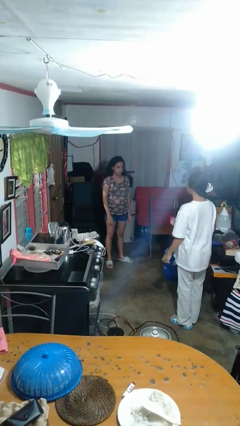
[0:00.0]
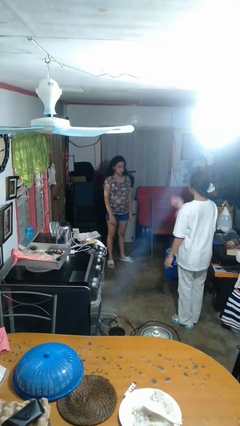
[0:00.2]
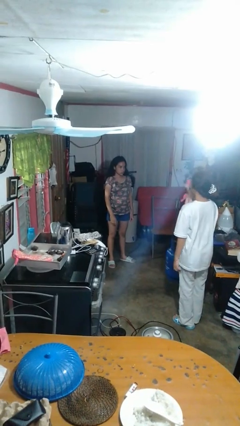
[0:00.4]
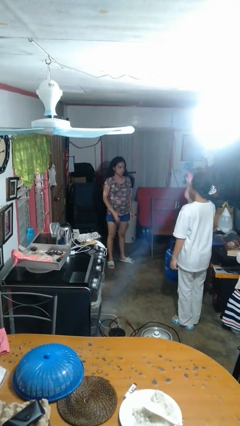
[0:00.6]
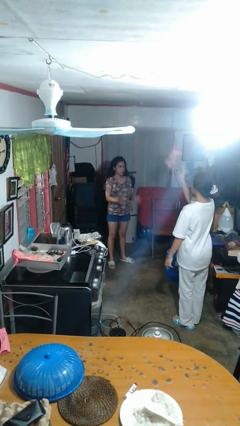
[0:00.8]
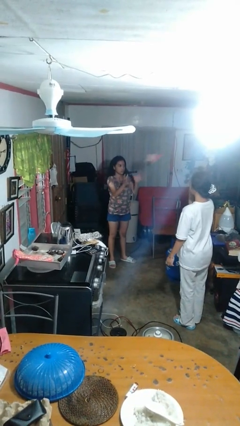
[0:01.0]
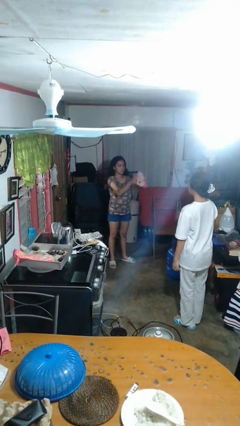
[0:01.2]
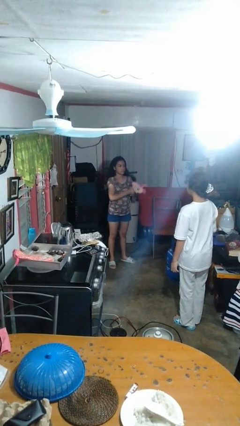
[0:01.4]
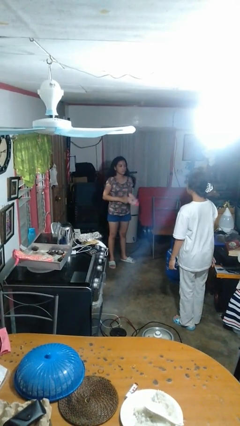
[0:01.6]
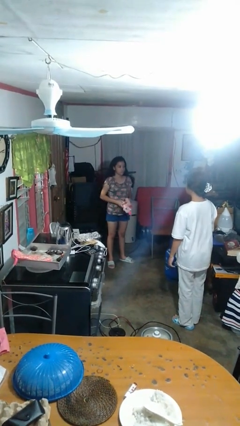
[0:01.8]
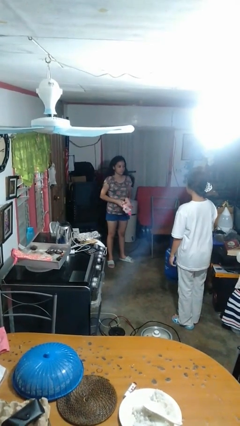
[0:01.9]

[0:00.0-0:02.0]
person catches object from person

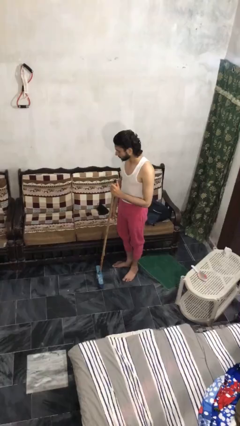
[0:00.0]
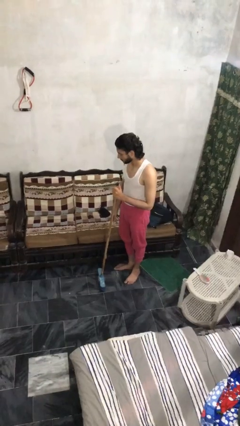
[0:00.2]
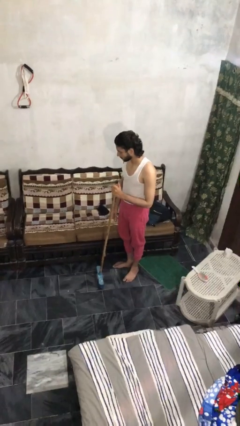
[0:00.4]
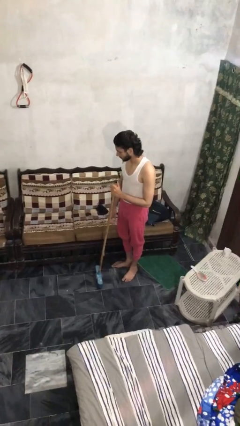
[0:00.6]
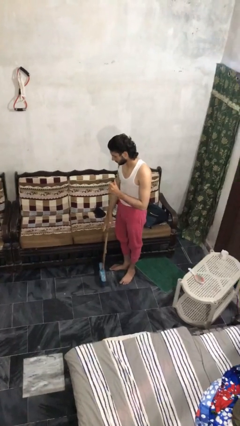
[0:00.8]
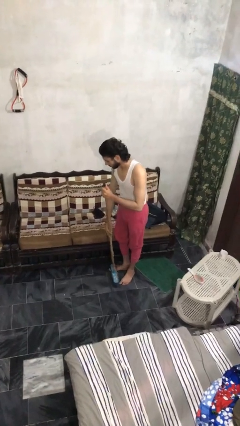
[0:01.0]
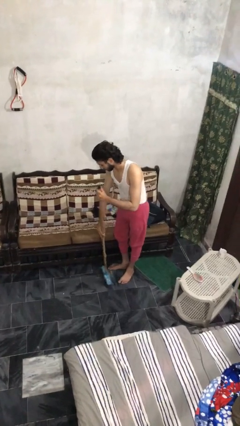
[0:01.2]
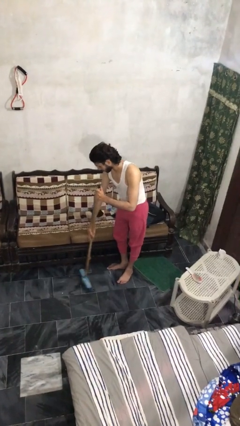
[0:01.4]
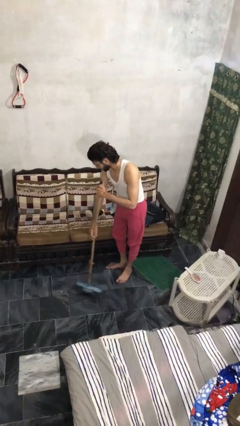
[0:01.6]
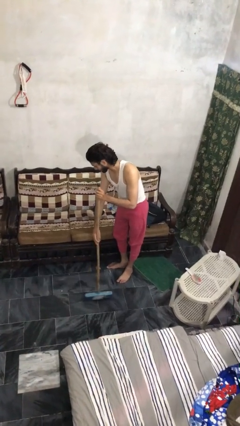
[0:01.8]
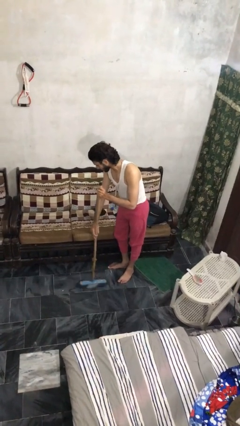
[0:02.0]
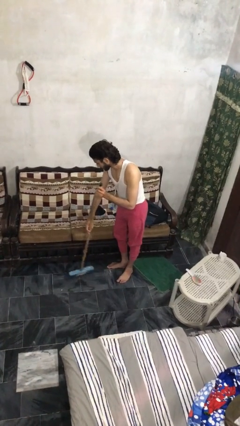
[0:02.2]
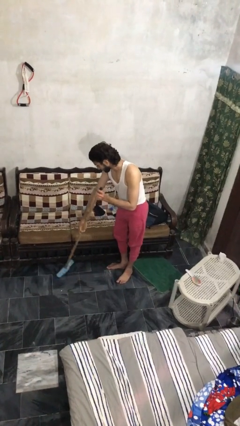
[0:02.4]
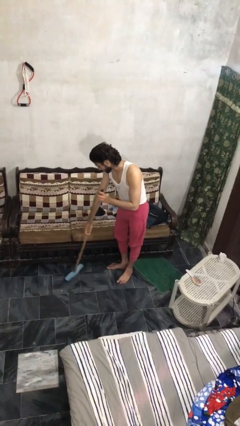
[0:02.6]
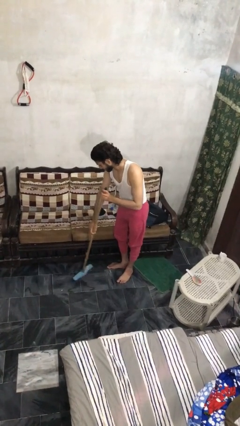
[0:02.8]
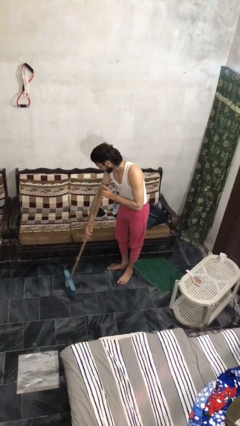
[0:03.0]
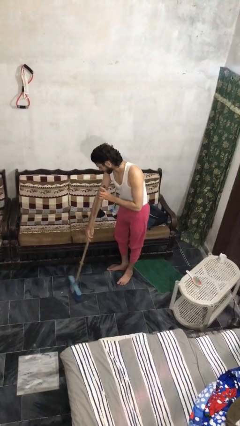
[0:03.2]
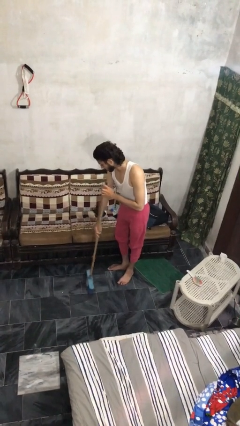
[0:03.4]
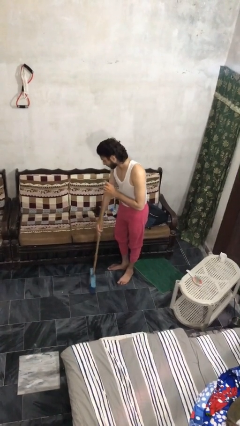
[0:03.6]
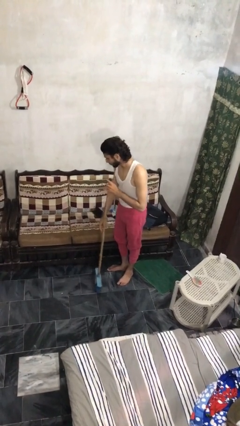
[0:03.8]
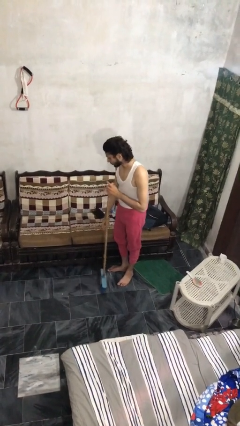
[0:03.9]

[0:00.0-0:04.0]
person sweeps floor

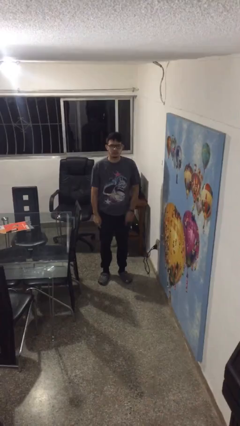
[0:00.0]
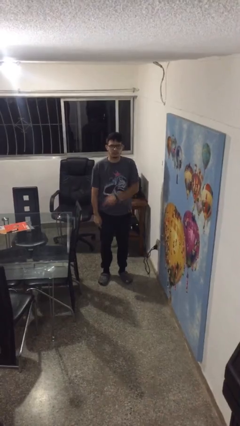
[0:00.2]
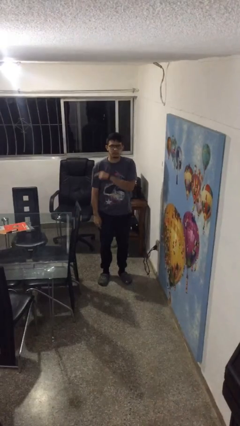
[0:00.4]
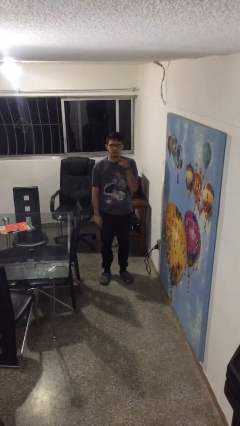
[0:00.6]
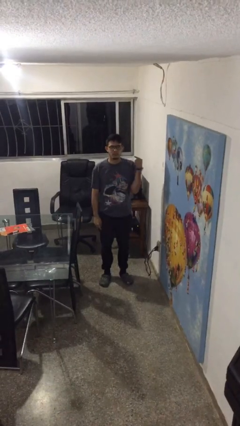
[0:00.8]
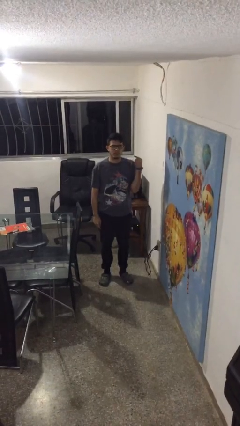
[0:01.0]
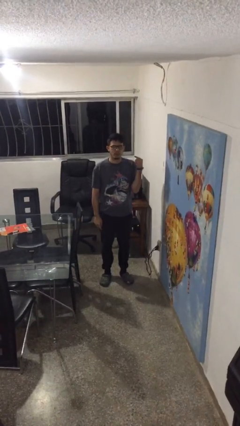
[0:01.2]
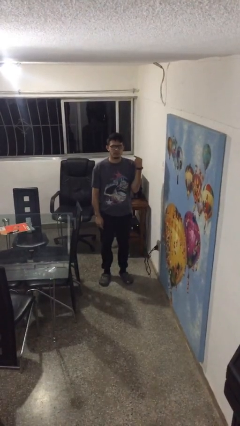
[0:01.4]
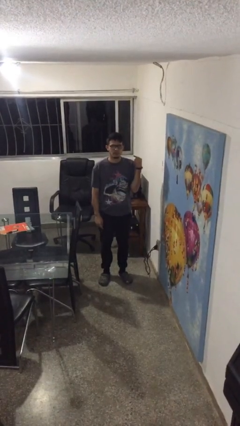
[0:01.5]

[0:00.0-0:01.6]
person gestures cut

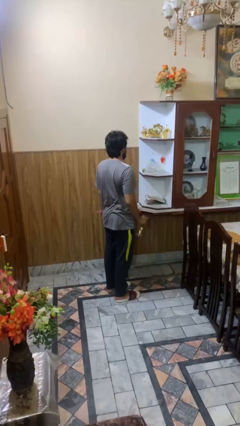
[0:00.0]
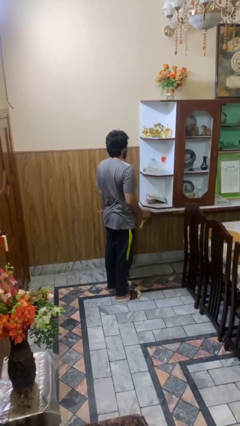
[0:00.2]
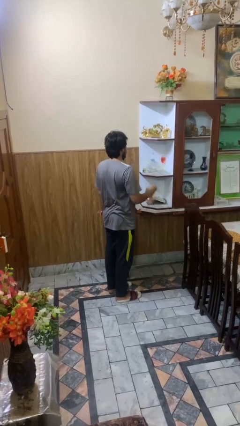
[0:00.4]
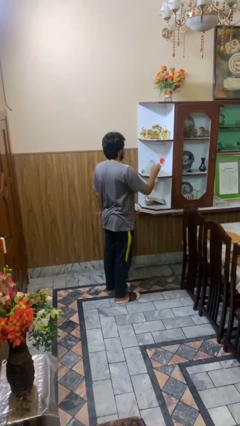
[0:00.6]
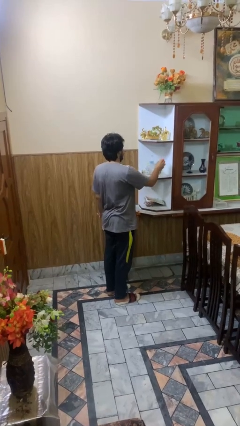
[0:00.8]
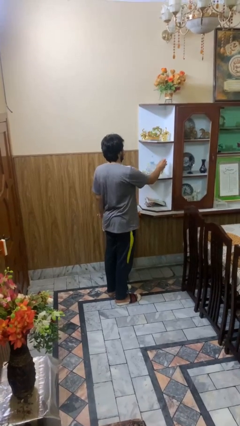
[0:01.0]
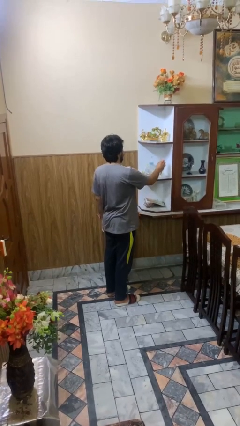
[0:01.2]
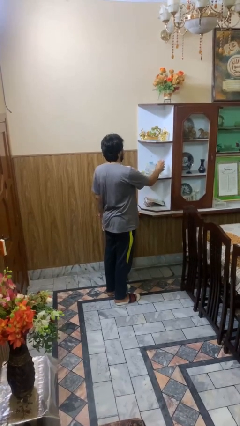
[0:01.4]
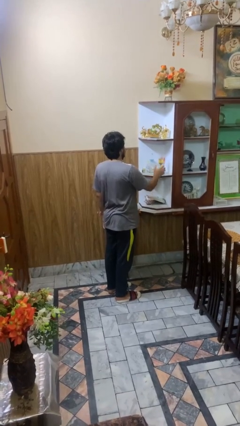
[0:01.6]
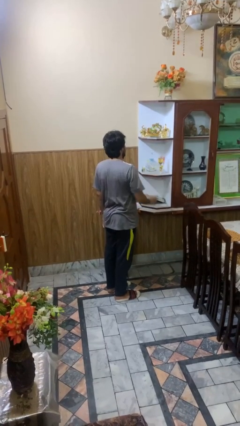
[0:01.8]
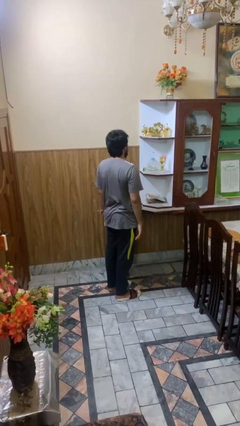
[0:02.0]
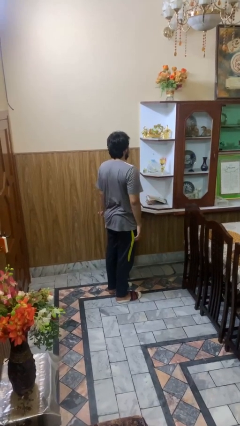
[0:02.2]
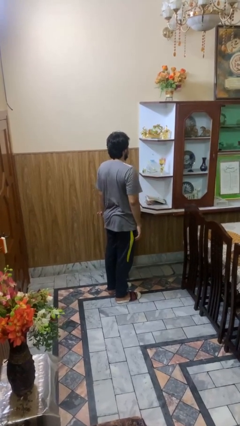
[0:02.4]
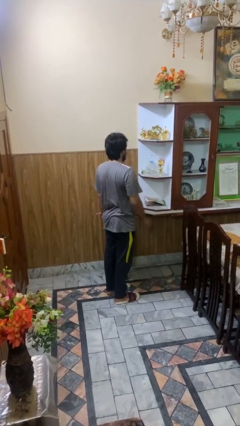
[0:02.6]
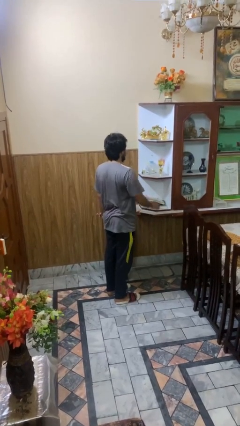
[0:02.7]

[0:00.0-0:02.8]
person puts down object into cabinet

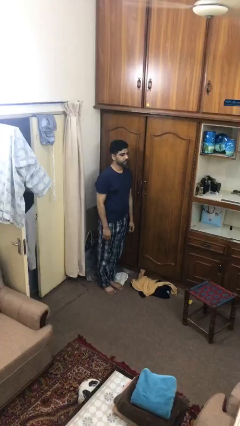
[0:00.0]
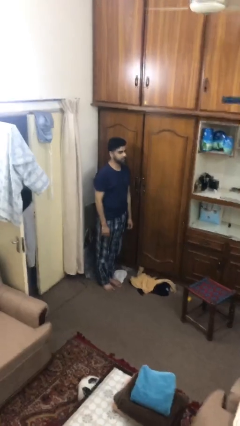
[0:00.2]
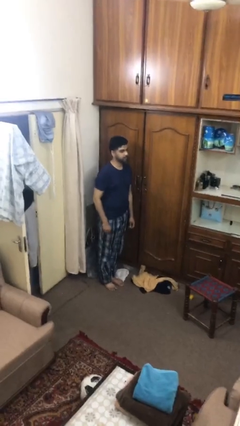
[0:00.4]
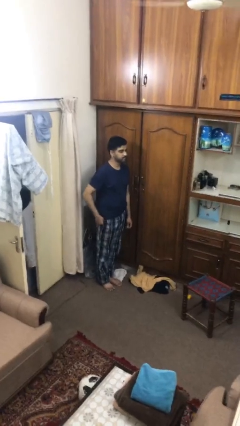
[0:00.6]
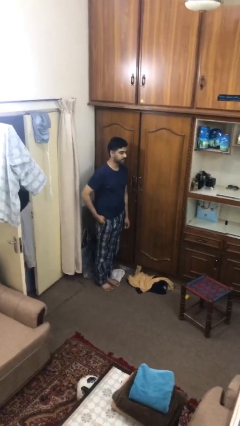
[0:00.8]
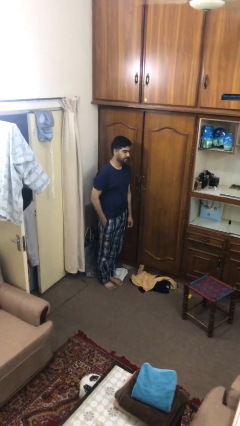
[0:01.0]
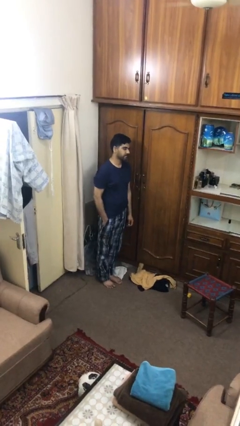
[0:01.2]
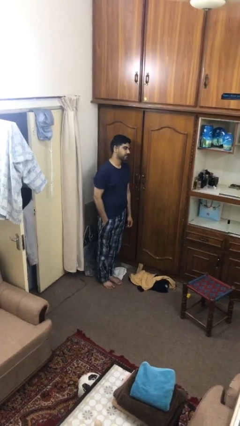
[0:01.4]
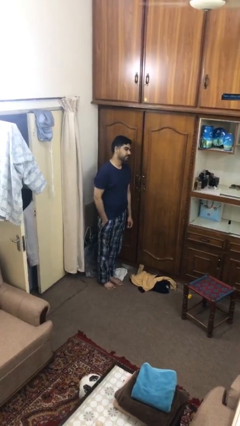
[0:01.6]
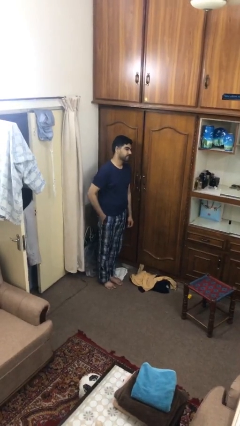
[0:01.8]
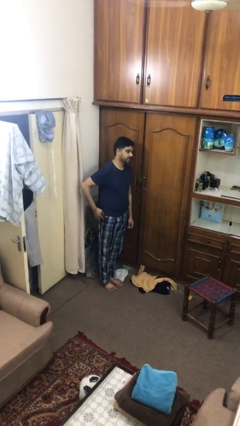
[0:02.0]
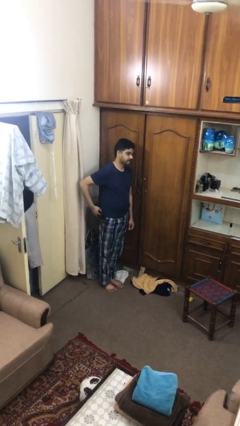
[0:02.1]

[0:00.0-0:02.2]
person takes phone from pocket

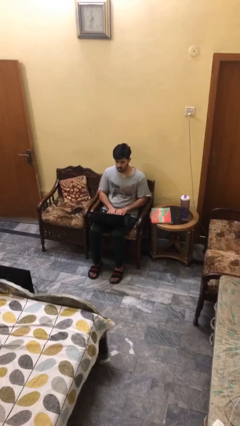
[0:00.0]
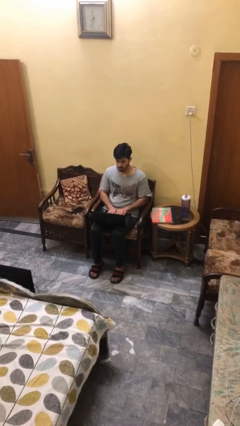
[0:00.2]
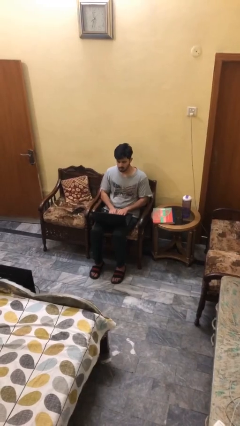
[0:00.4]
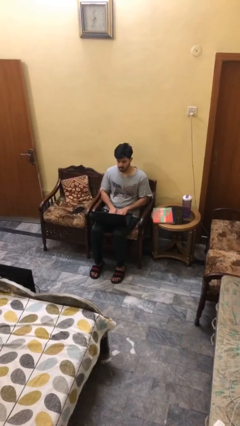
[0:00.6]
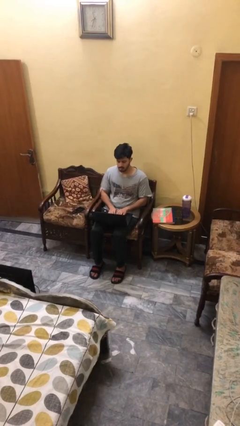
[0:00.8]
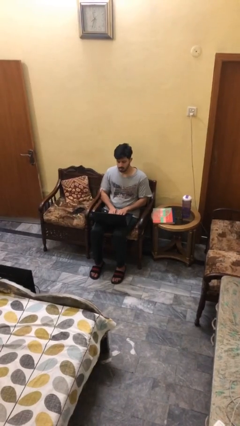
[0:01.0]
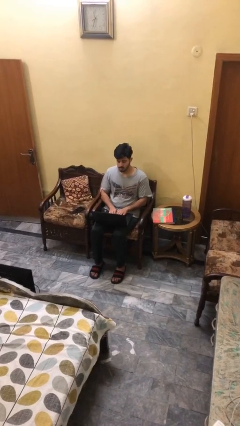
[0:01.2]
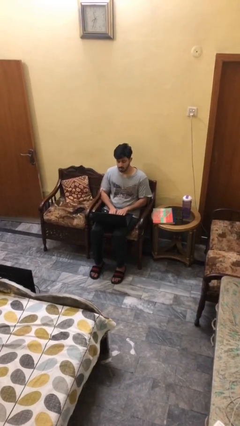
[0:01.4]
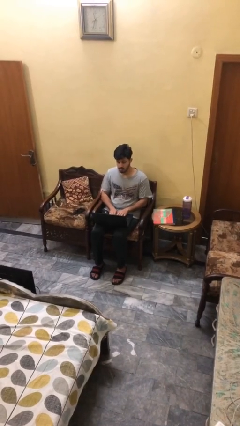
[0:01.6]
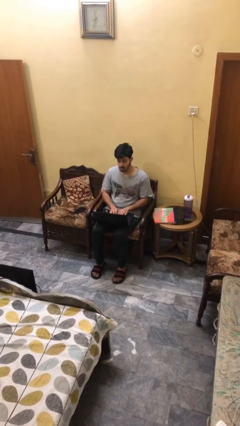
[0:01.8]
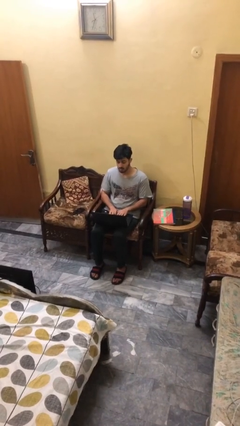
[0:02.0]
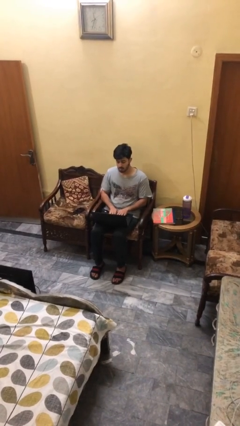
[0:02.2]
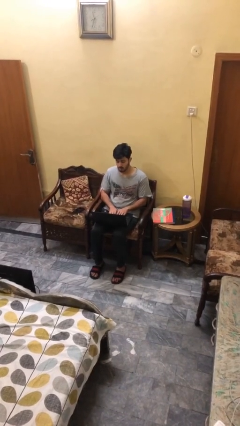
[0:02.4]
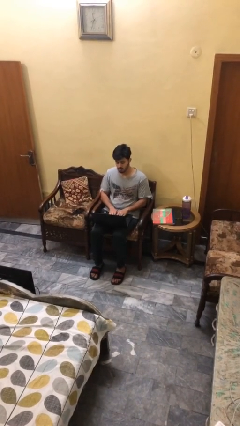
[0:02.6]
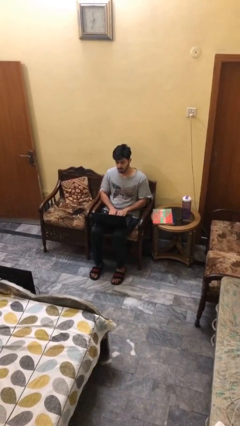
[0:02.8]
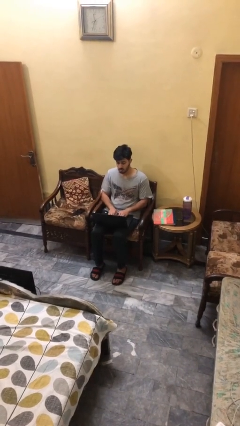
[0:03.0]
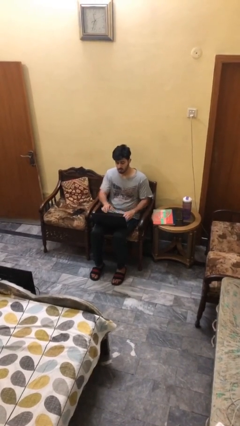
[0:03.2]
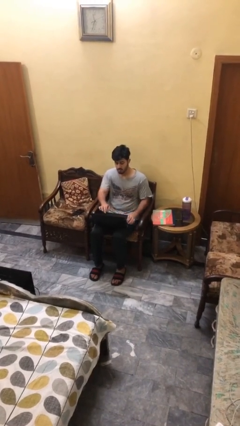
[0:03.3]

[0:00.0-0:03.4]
person interacts with laptop

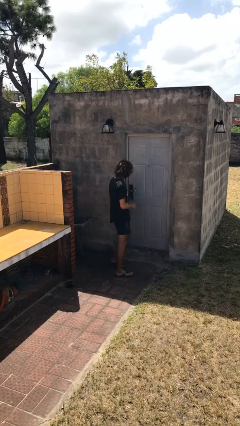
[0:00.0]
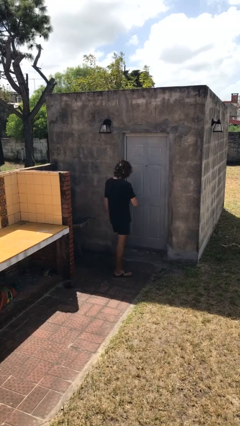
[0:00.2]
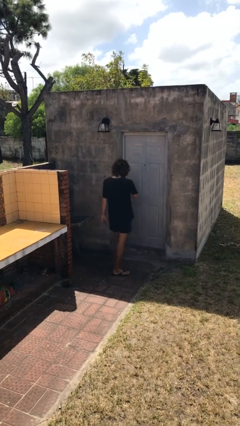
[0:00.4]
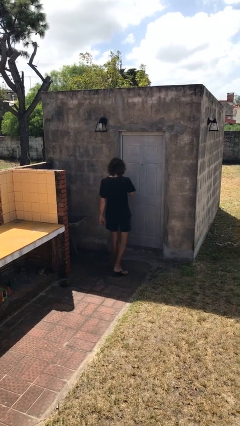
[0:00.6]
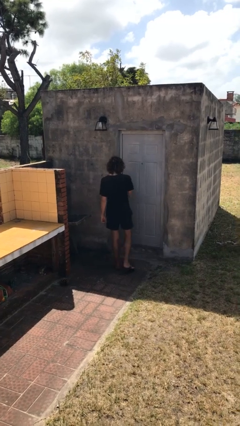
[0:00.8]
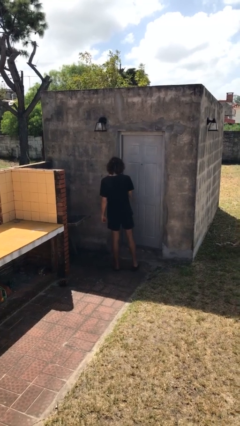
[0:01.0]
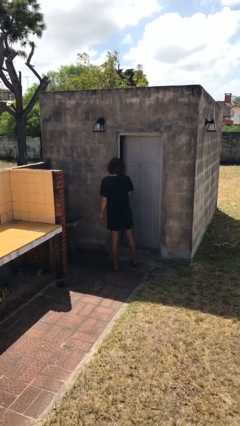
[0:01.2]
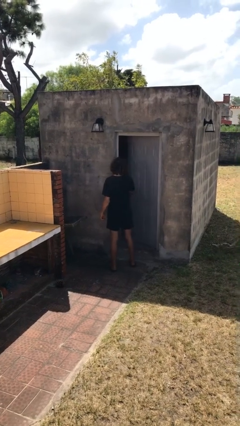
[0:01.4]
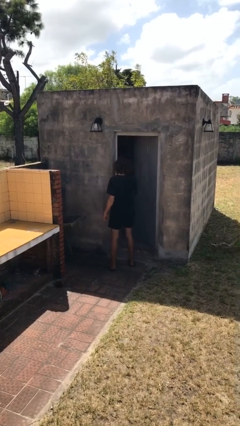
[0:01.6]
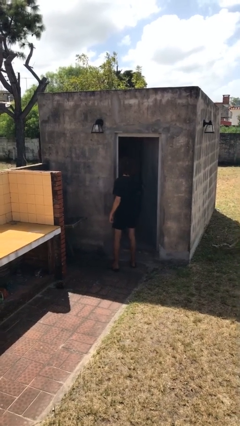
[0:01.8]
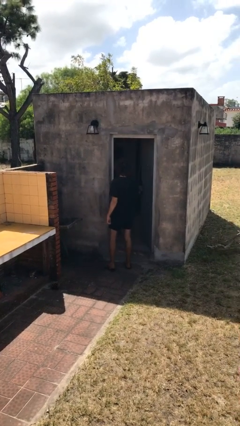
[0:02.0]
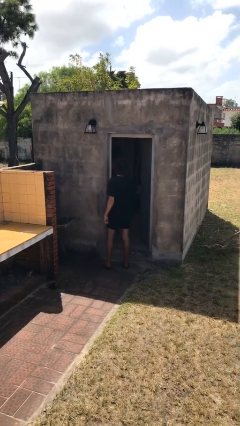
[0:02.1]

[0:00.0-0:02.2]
person opens facility door
